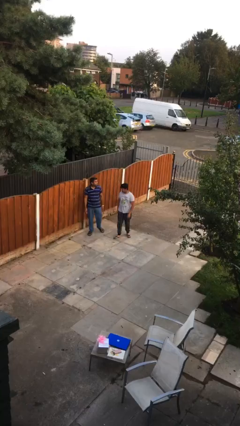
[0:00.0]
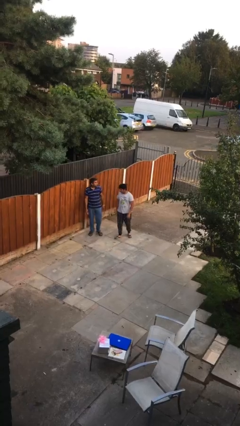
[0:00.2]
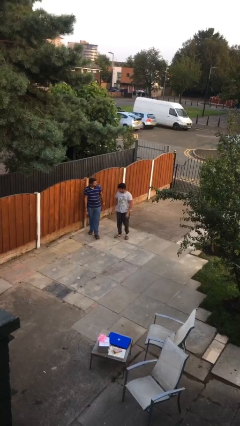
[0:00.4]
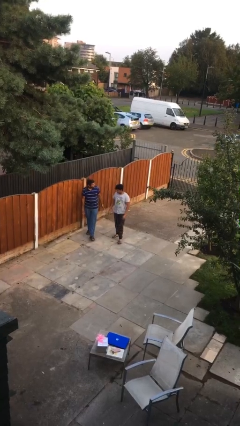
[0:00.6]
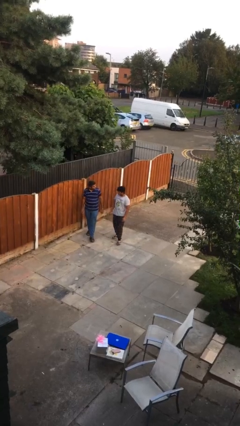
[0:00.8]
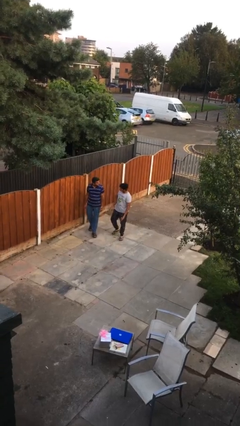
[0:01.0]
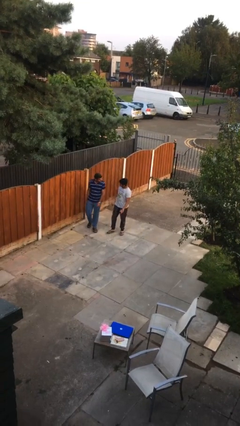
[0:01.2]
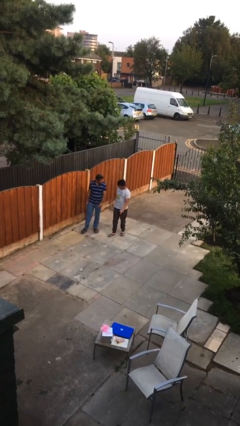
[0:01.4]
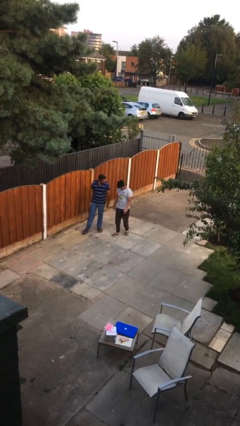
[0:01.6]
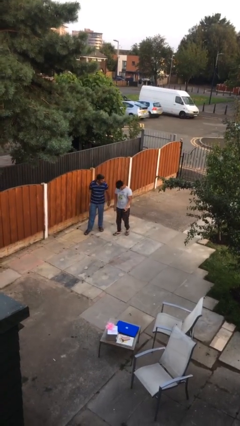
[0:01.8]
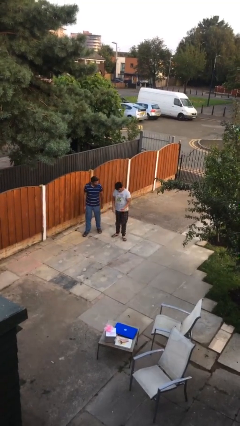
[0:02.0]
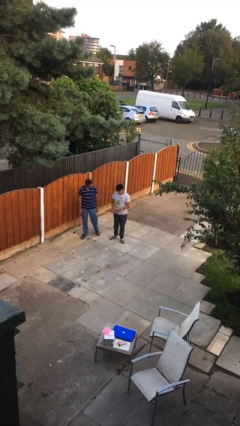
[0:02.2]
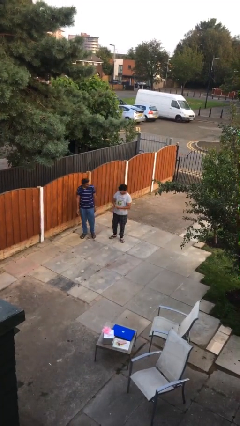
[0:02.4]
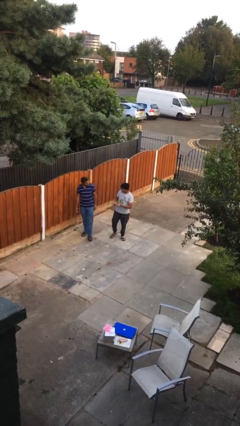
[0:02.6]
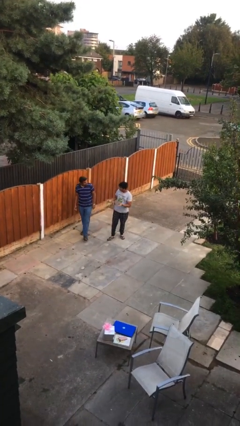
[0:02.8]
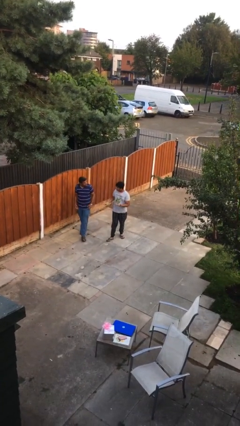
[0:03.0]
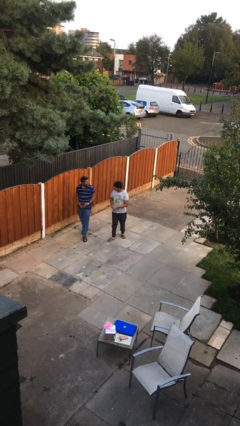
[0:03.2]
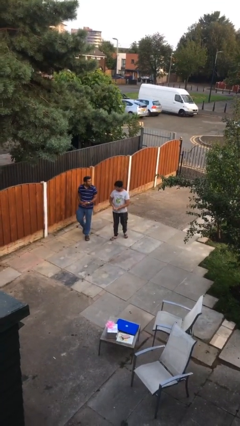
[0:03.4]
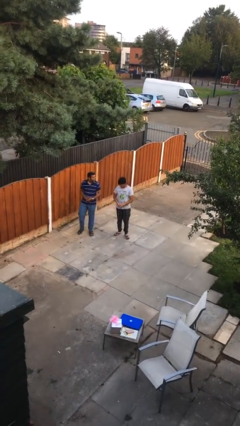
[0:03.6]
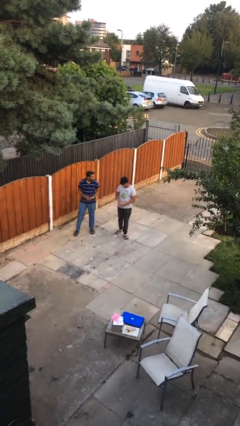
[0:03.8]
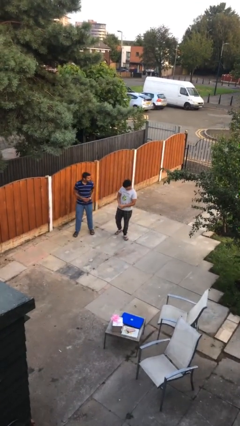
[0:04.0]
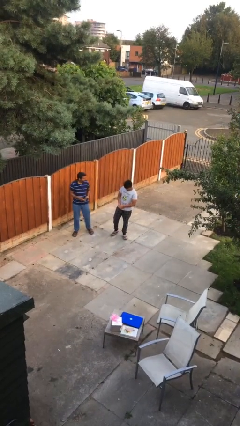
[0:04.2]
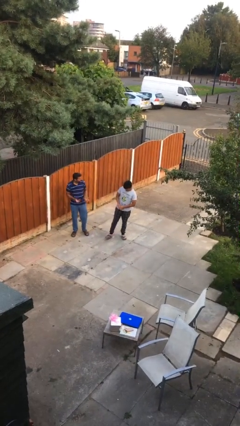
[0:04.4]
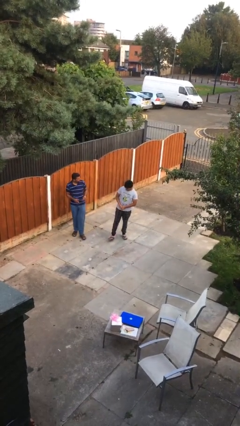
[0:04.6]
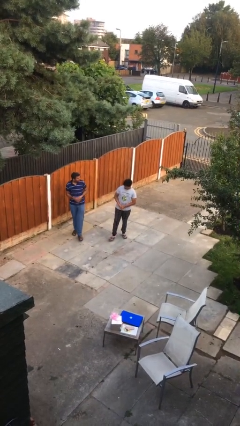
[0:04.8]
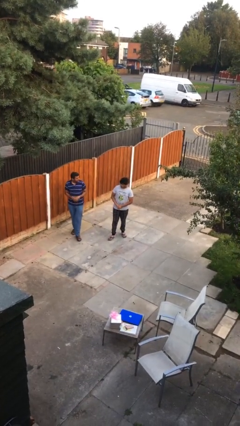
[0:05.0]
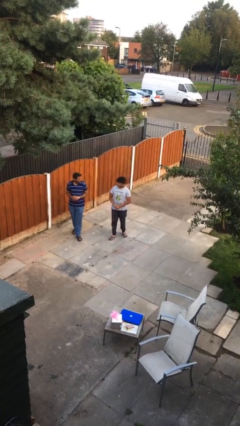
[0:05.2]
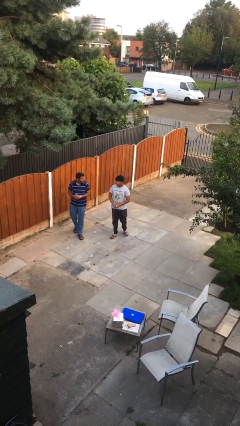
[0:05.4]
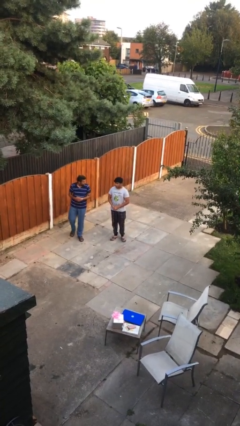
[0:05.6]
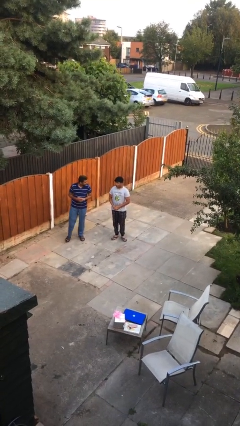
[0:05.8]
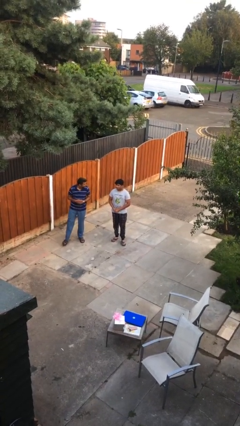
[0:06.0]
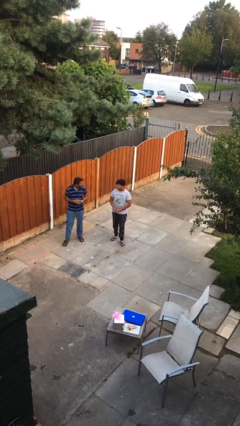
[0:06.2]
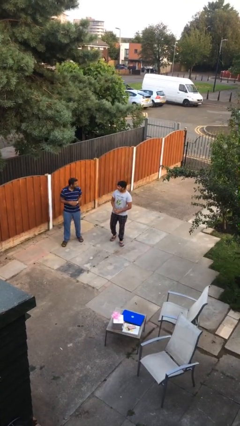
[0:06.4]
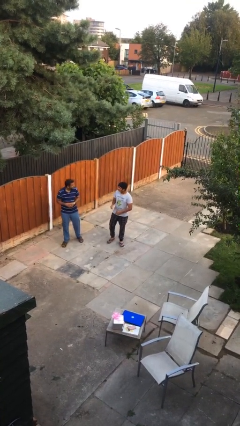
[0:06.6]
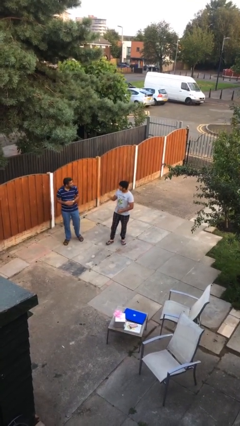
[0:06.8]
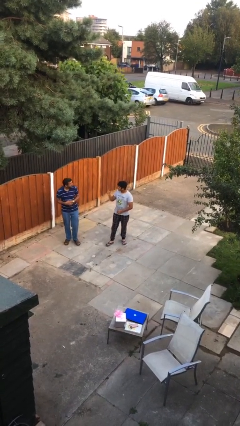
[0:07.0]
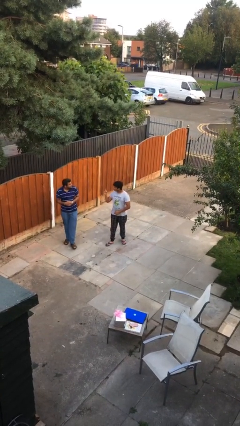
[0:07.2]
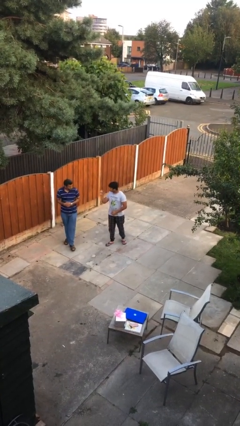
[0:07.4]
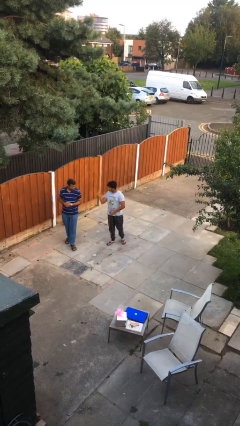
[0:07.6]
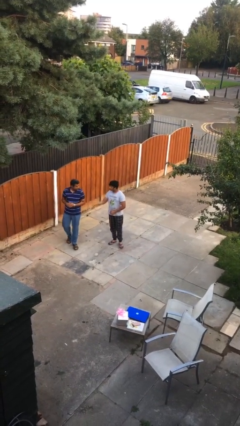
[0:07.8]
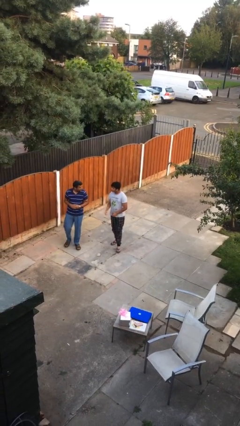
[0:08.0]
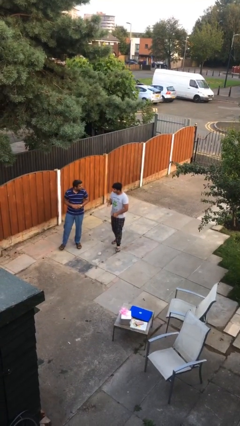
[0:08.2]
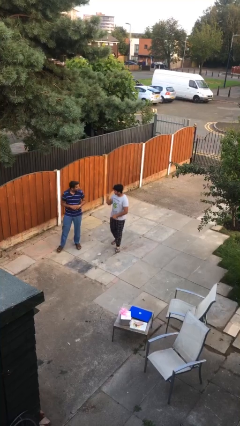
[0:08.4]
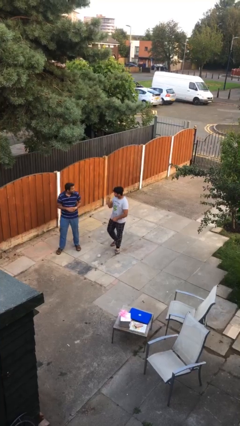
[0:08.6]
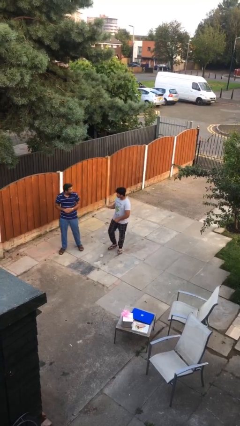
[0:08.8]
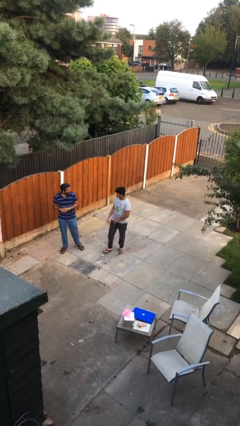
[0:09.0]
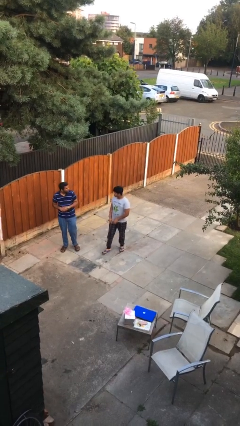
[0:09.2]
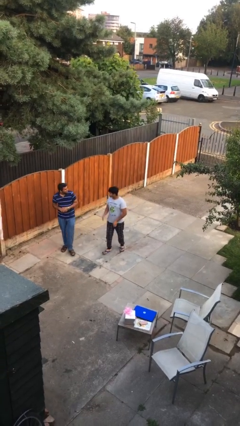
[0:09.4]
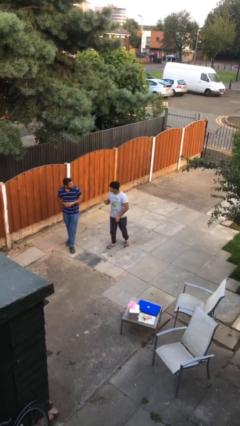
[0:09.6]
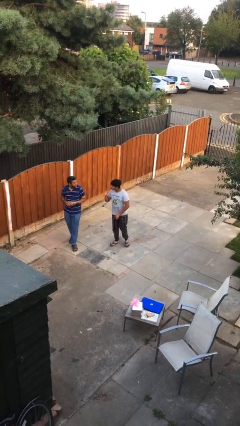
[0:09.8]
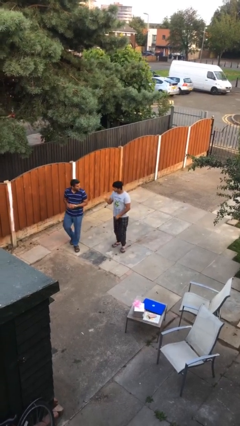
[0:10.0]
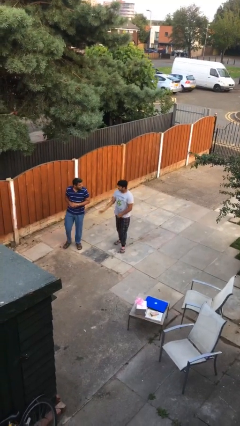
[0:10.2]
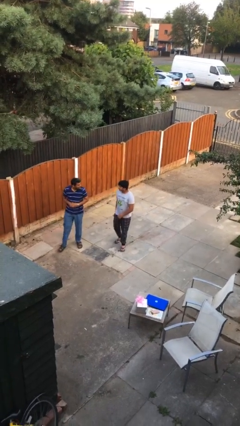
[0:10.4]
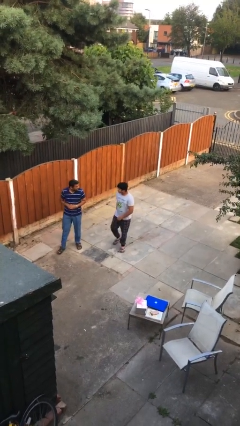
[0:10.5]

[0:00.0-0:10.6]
person talks to person

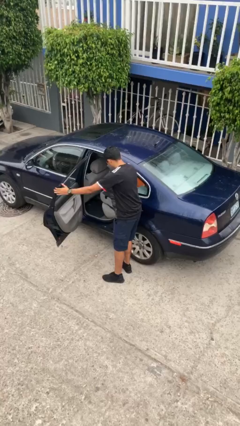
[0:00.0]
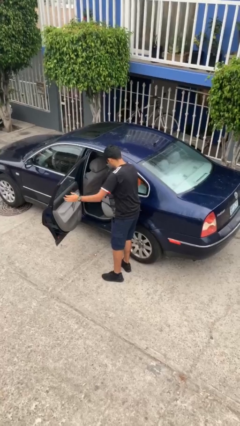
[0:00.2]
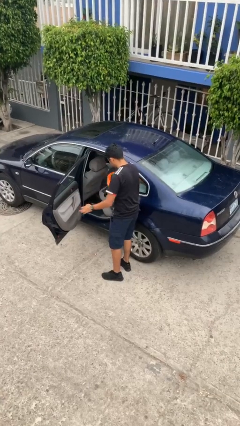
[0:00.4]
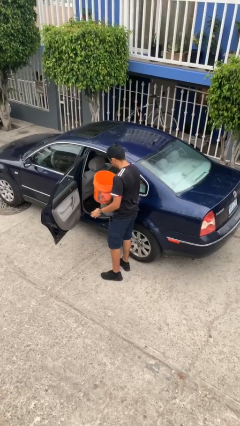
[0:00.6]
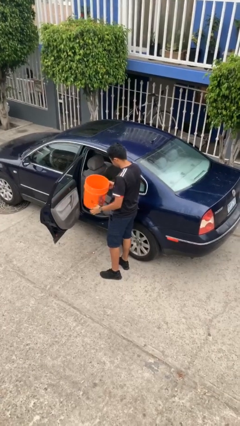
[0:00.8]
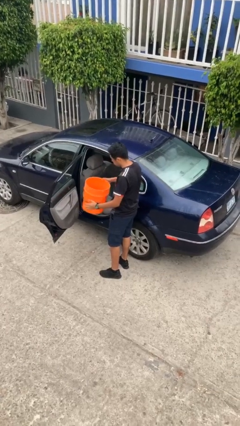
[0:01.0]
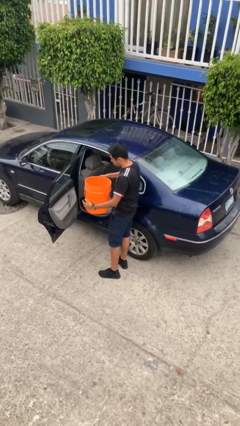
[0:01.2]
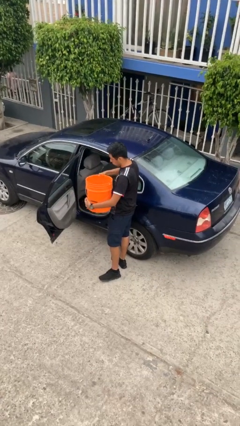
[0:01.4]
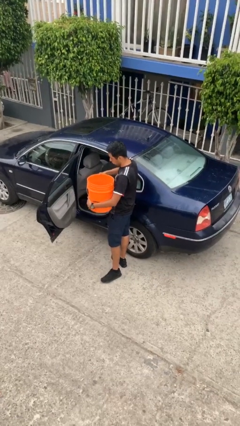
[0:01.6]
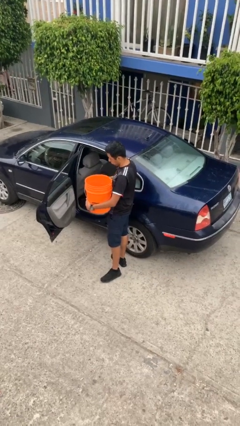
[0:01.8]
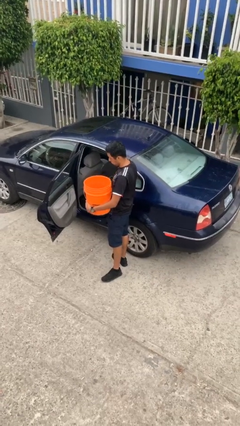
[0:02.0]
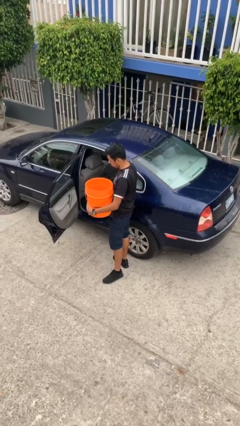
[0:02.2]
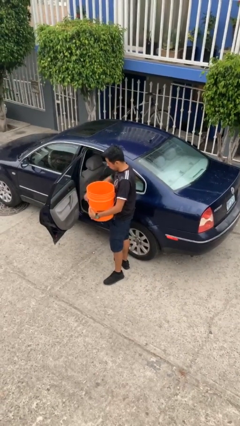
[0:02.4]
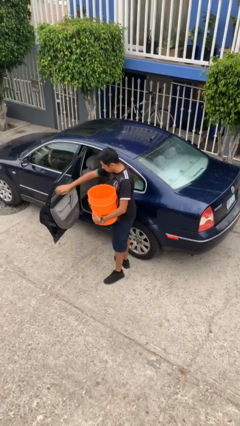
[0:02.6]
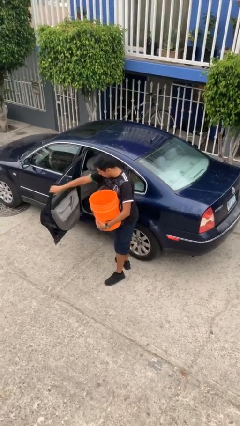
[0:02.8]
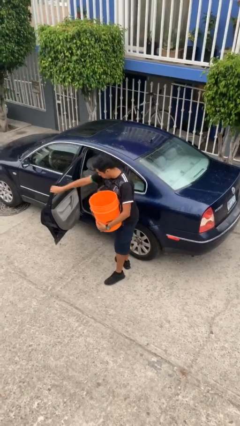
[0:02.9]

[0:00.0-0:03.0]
person unloads car

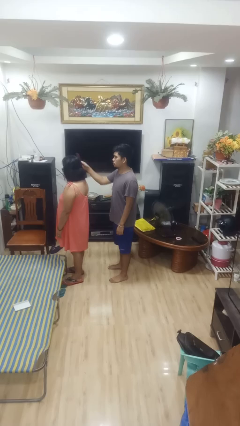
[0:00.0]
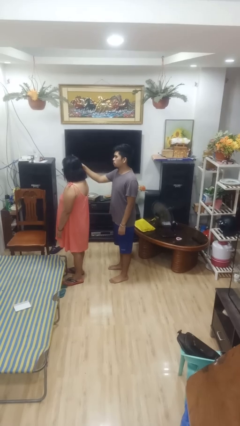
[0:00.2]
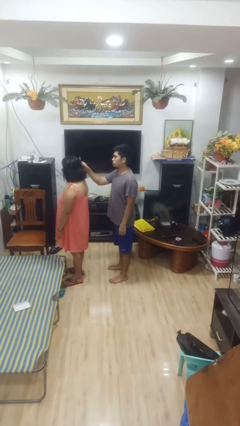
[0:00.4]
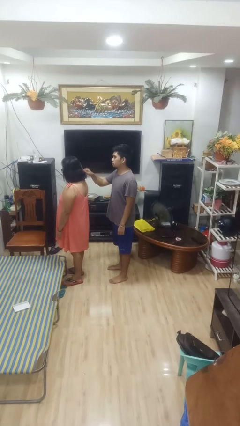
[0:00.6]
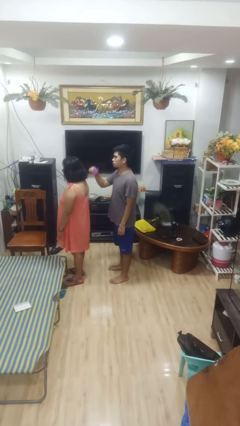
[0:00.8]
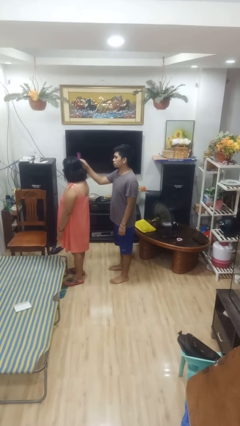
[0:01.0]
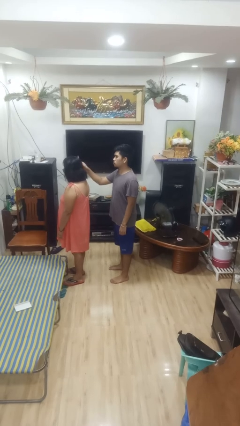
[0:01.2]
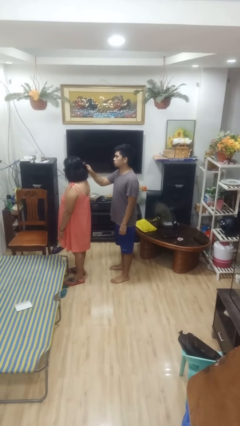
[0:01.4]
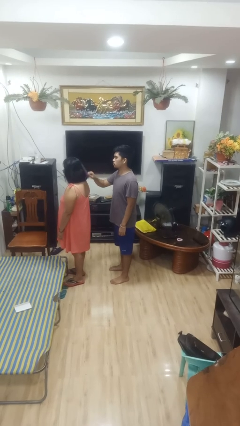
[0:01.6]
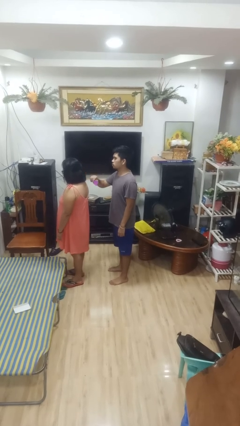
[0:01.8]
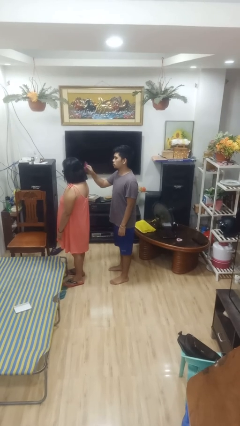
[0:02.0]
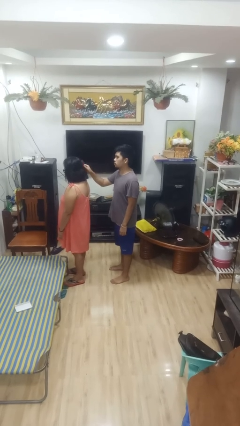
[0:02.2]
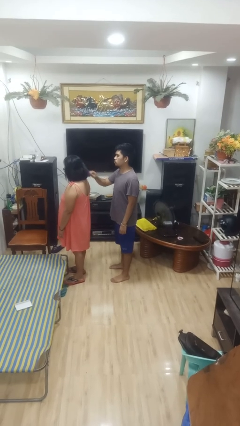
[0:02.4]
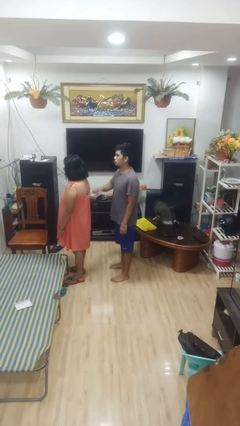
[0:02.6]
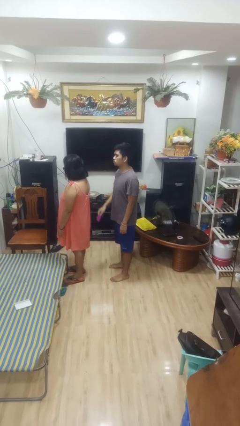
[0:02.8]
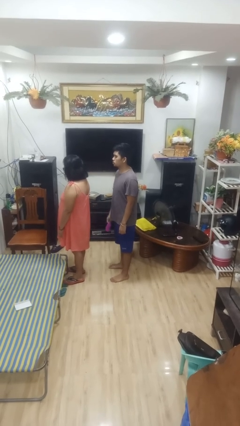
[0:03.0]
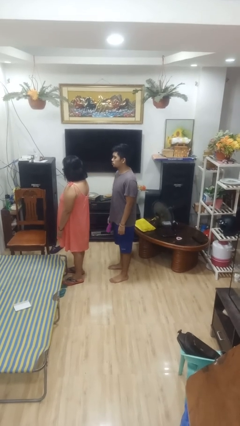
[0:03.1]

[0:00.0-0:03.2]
person brushes hair of person

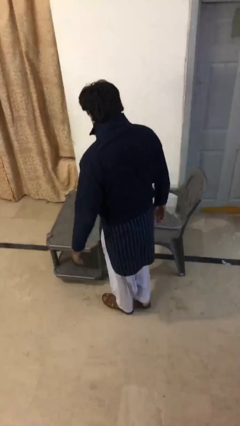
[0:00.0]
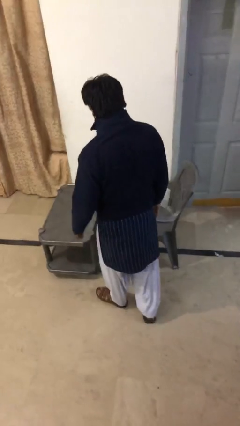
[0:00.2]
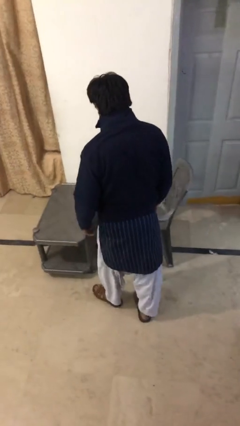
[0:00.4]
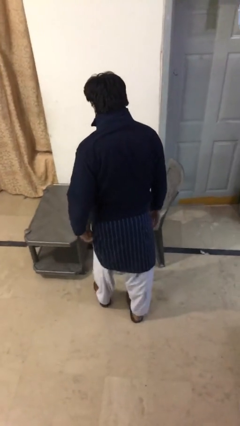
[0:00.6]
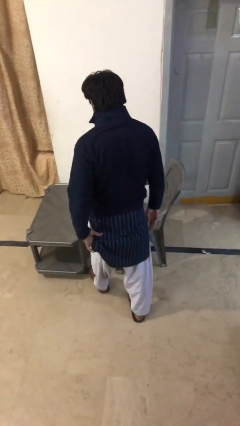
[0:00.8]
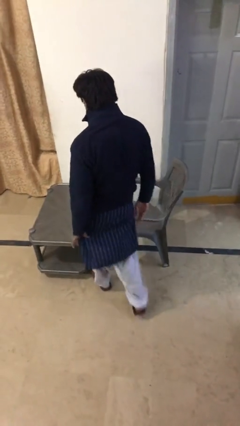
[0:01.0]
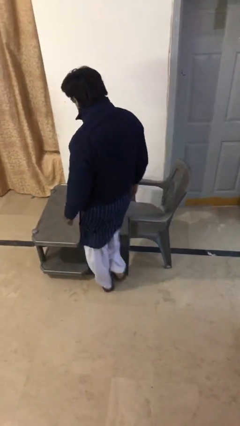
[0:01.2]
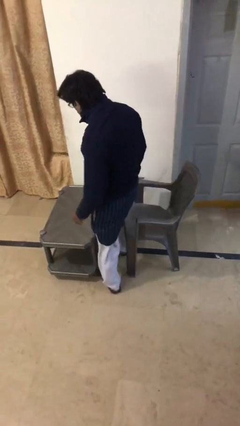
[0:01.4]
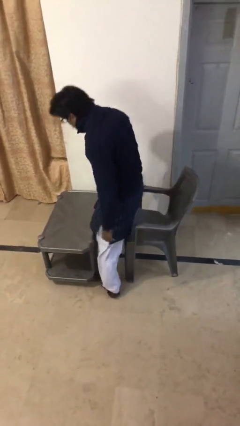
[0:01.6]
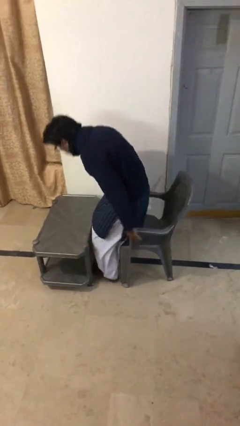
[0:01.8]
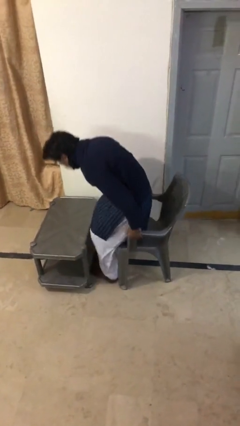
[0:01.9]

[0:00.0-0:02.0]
person sits down
